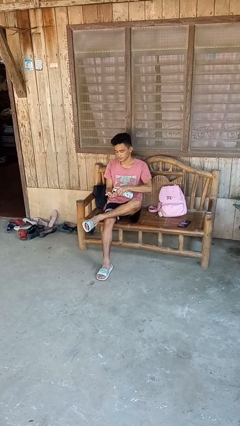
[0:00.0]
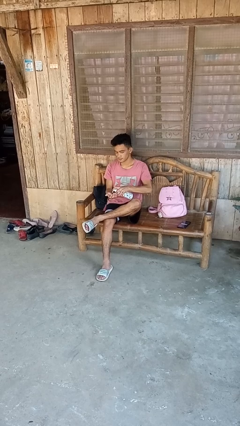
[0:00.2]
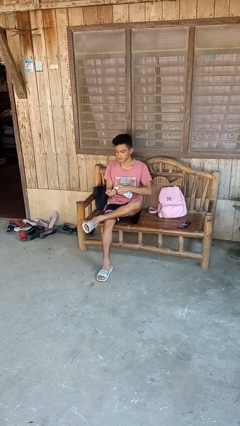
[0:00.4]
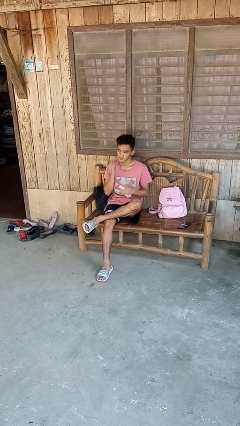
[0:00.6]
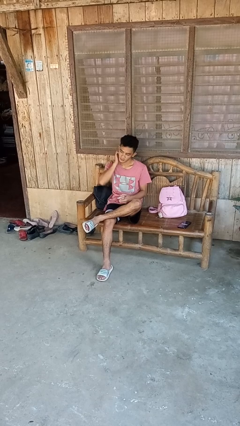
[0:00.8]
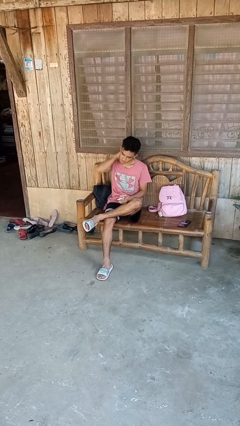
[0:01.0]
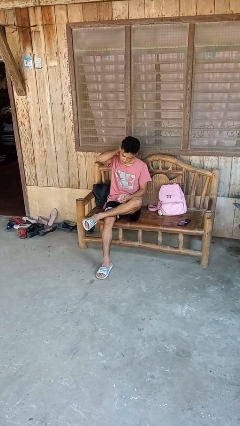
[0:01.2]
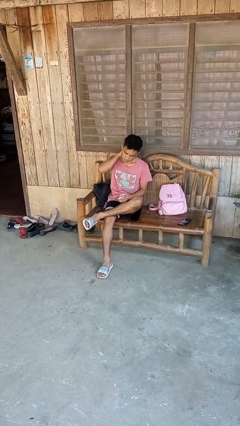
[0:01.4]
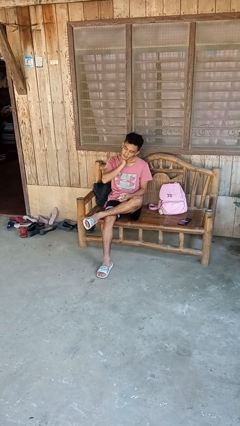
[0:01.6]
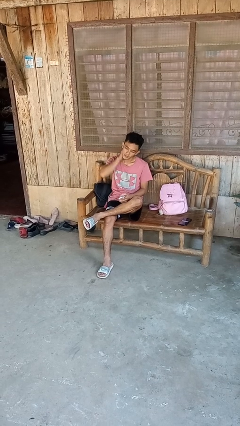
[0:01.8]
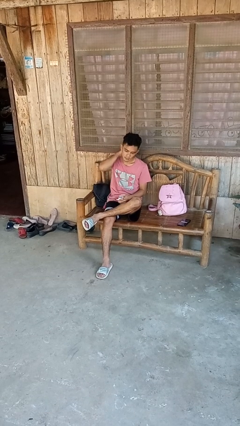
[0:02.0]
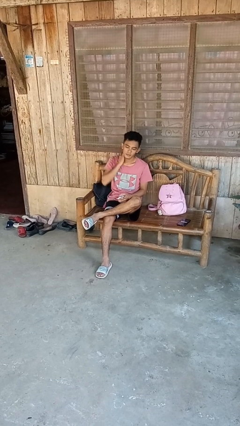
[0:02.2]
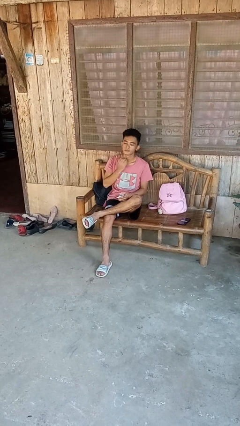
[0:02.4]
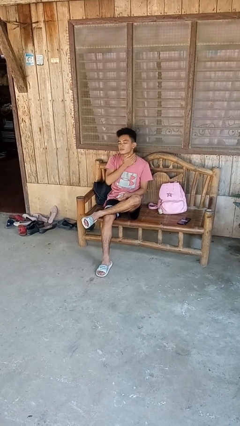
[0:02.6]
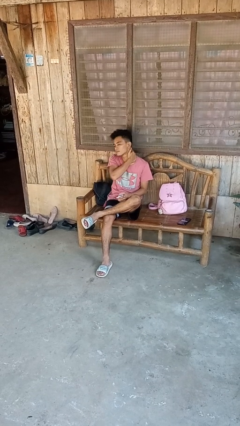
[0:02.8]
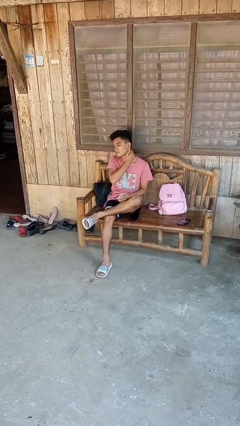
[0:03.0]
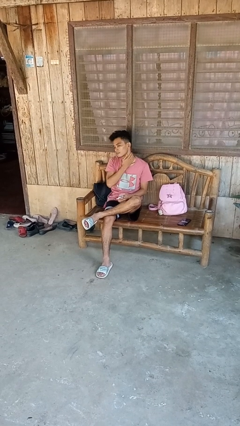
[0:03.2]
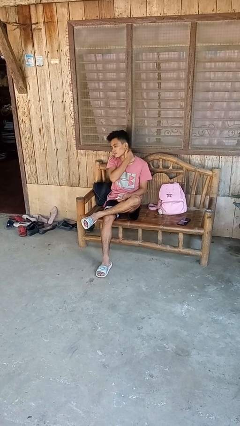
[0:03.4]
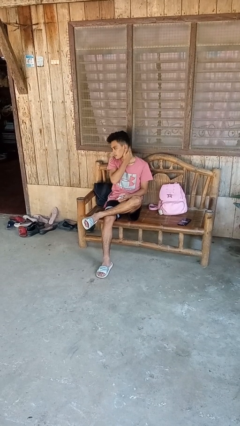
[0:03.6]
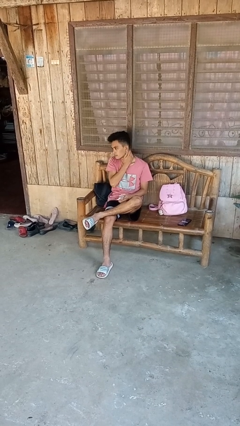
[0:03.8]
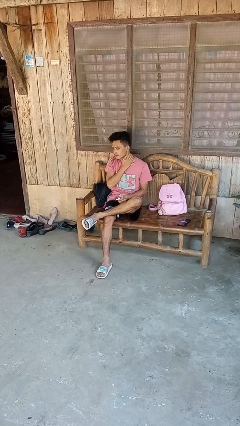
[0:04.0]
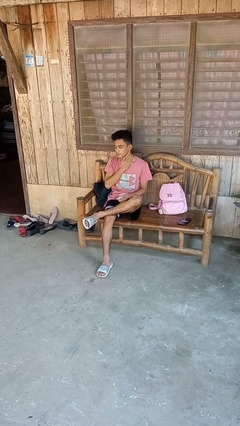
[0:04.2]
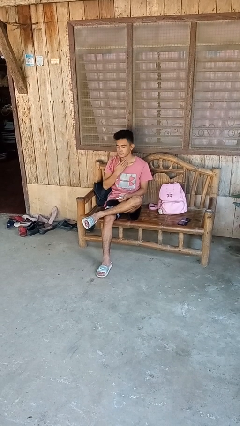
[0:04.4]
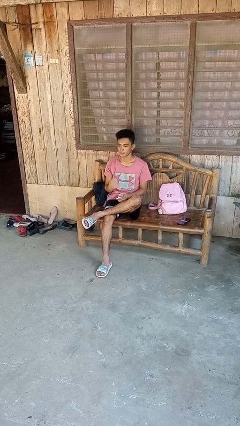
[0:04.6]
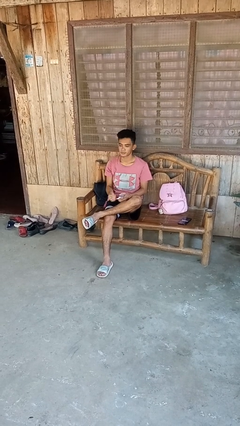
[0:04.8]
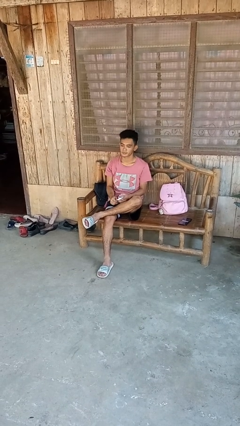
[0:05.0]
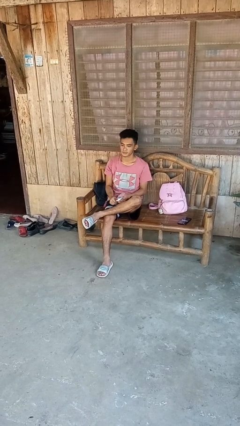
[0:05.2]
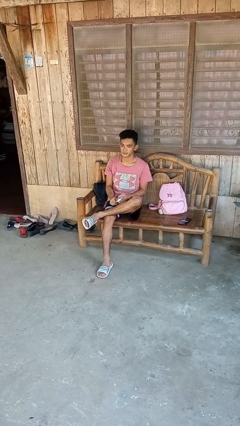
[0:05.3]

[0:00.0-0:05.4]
person applies sunscreen

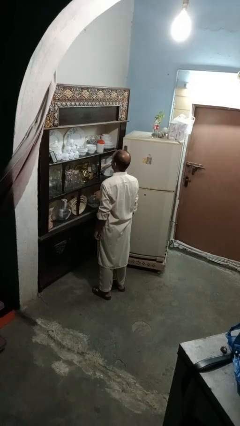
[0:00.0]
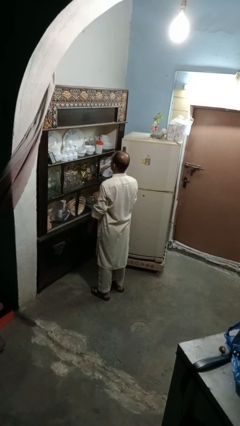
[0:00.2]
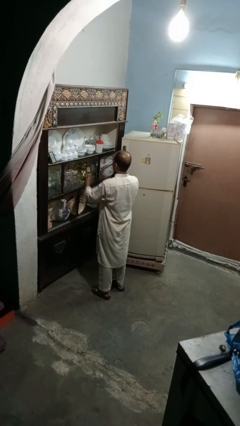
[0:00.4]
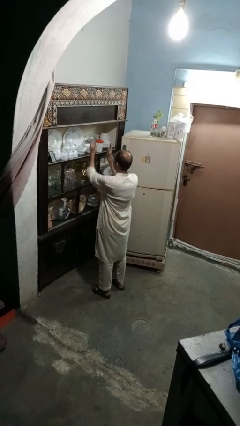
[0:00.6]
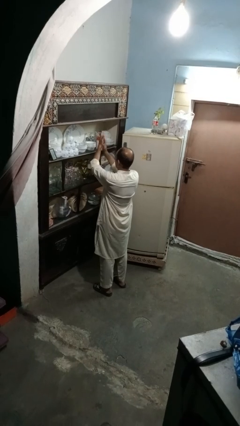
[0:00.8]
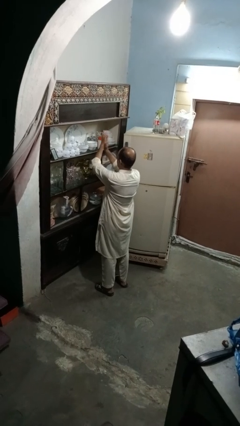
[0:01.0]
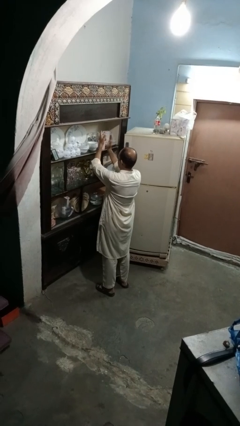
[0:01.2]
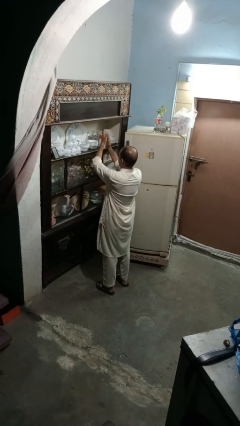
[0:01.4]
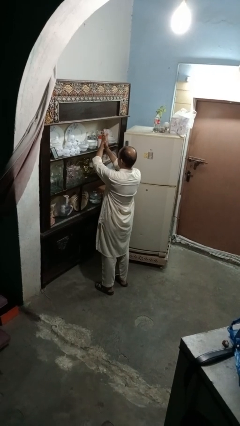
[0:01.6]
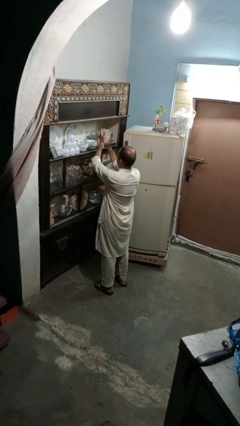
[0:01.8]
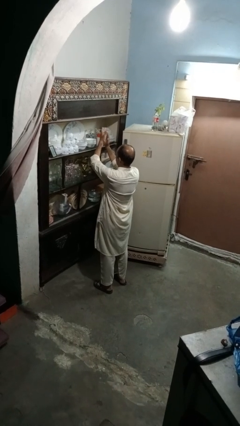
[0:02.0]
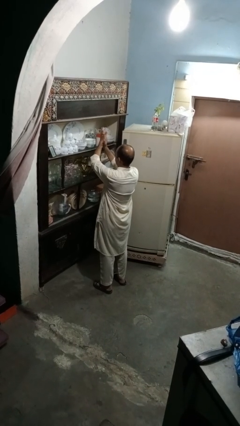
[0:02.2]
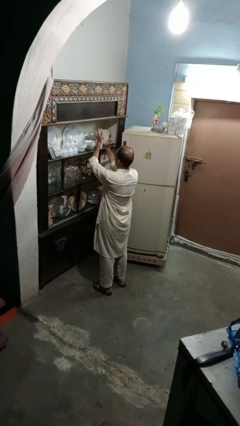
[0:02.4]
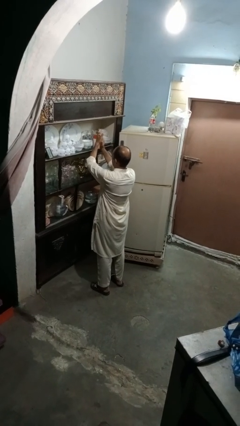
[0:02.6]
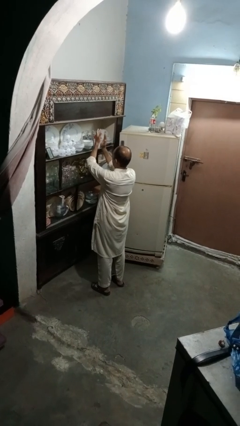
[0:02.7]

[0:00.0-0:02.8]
person claps hands

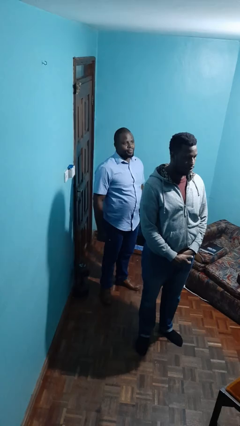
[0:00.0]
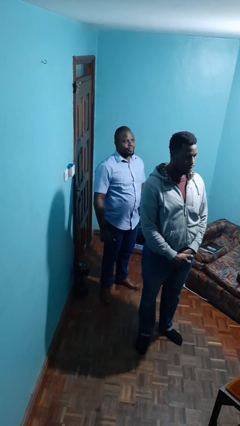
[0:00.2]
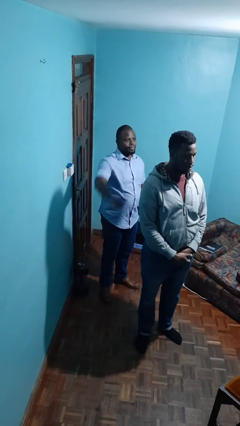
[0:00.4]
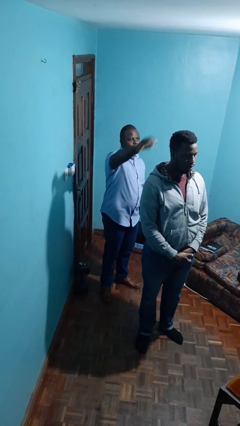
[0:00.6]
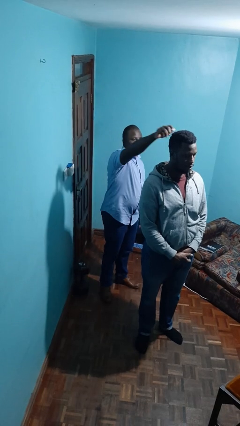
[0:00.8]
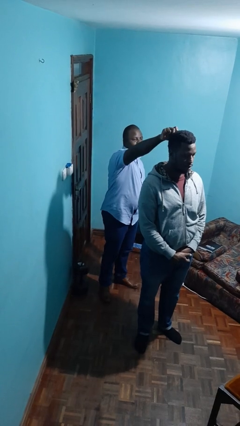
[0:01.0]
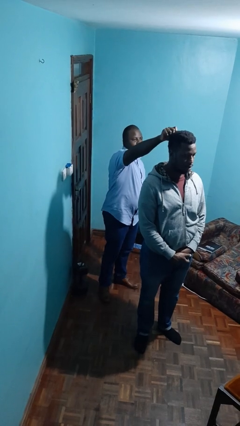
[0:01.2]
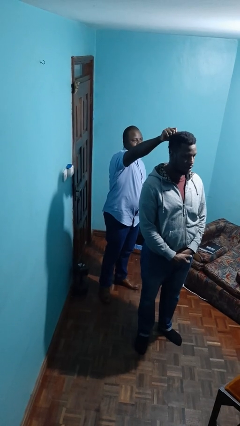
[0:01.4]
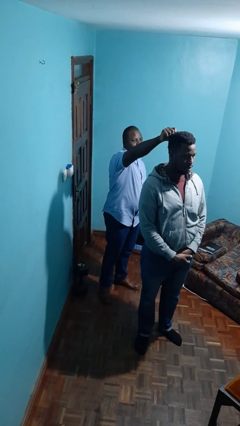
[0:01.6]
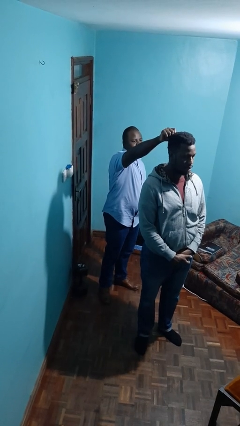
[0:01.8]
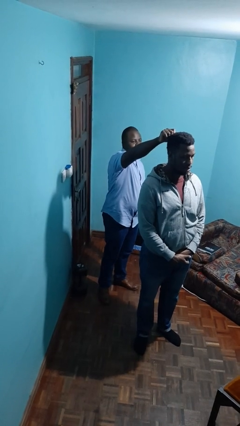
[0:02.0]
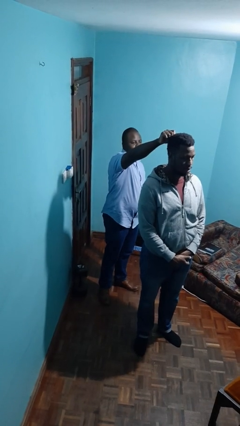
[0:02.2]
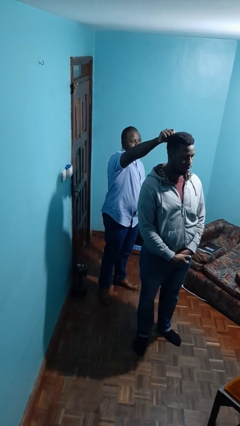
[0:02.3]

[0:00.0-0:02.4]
person grabs person by hair

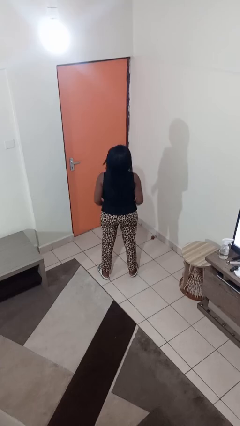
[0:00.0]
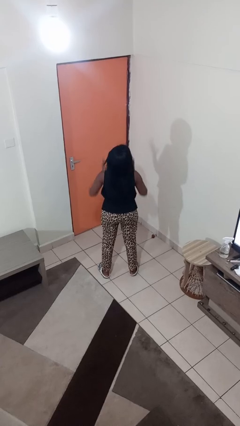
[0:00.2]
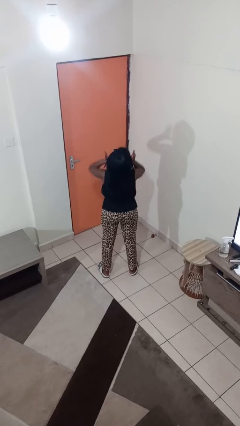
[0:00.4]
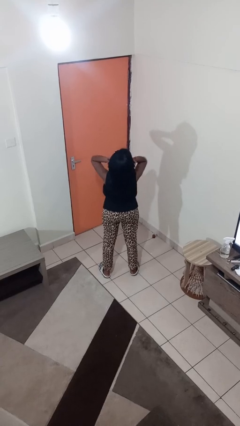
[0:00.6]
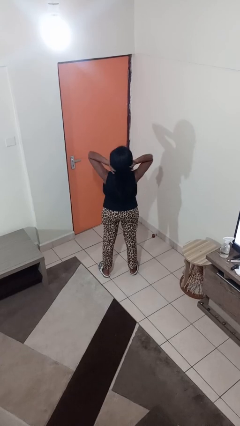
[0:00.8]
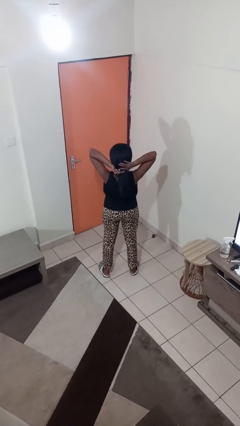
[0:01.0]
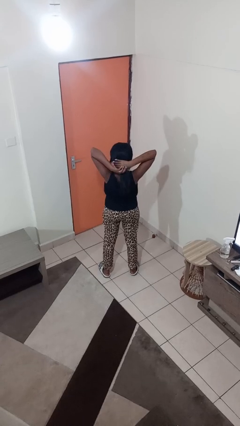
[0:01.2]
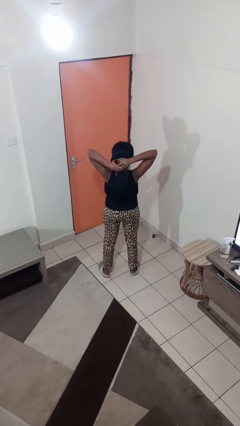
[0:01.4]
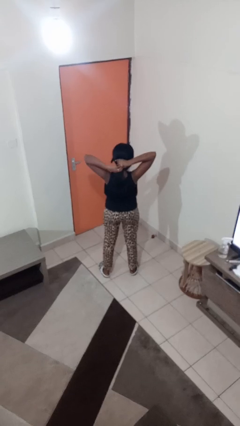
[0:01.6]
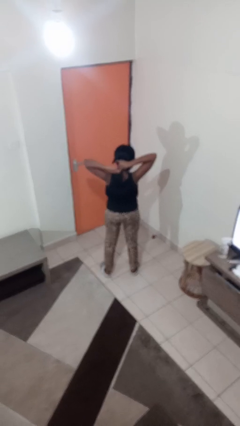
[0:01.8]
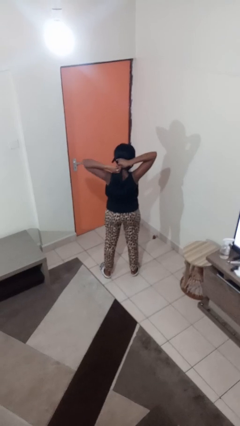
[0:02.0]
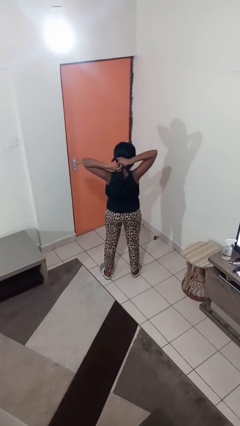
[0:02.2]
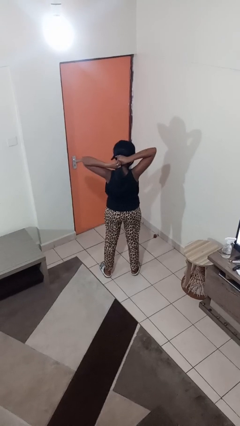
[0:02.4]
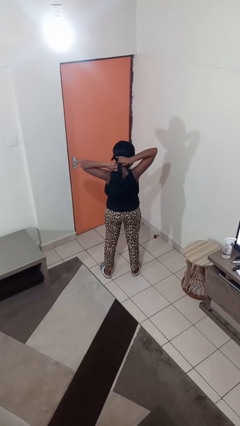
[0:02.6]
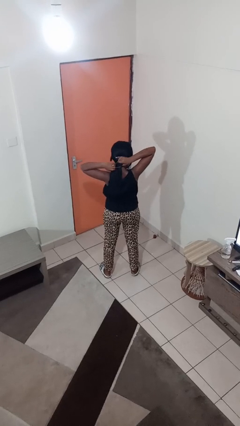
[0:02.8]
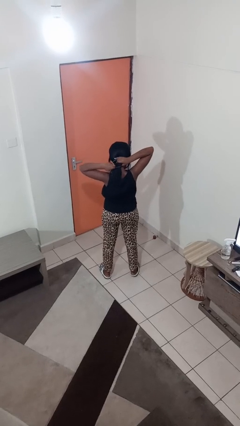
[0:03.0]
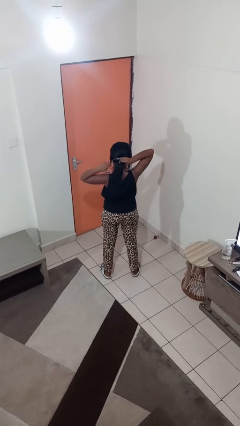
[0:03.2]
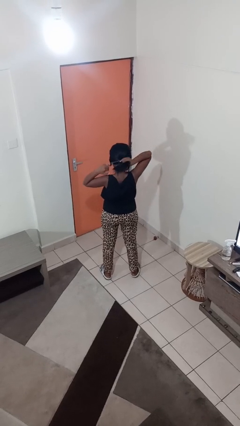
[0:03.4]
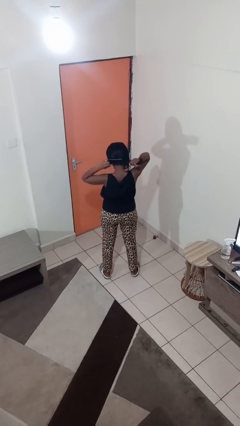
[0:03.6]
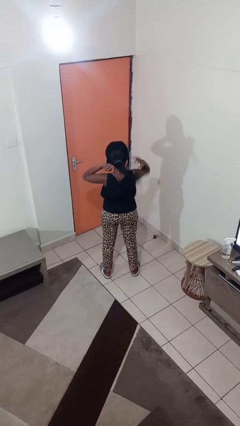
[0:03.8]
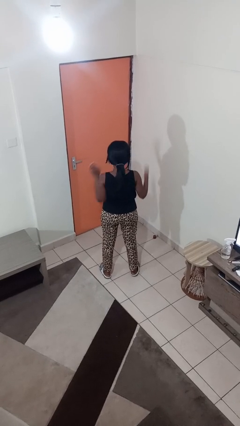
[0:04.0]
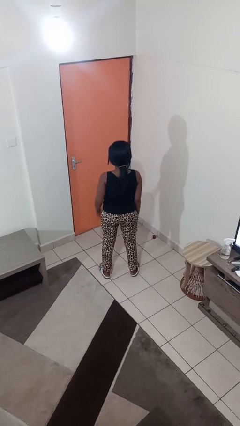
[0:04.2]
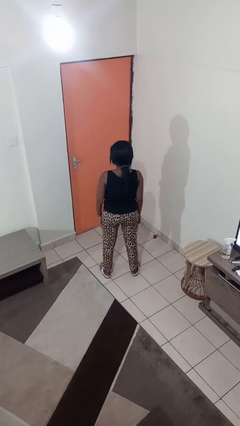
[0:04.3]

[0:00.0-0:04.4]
person puts hair in ponytail

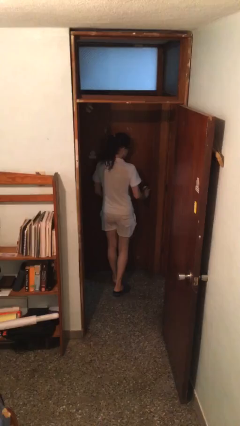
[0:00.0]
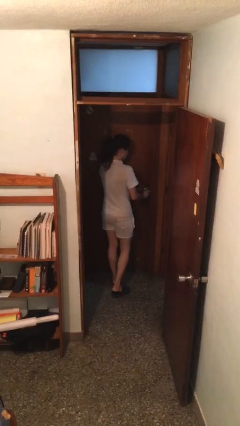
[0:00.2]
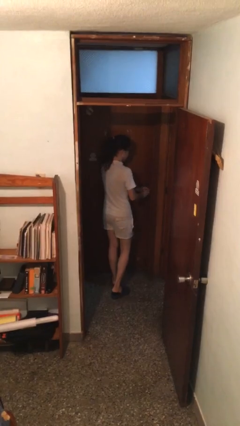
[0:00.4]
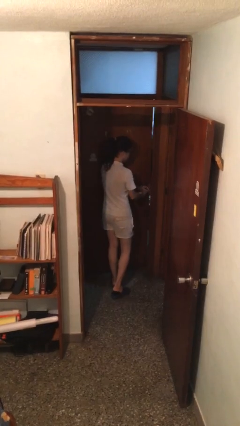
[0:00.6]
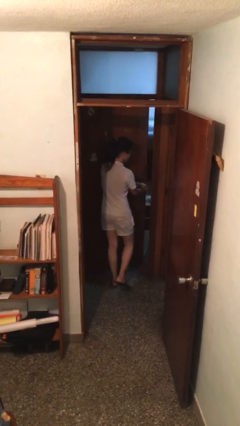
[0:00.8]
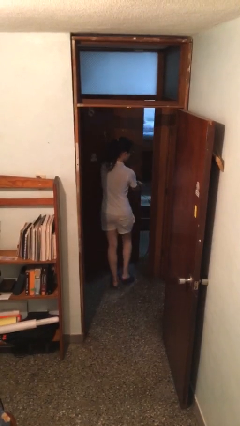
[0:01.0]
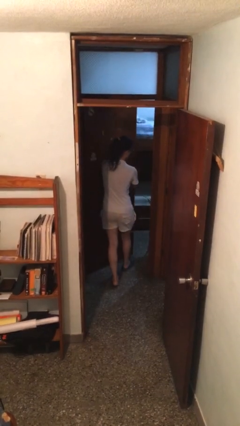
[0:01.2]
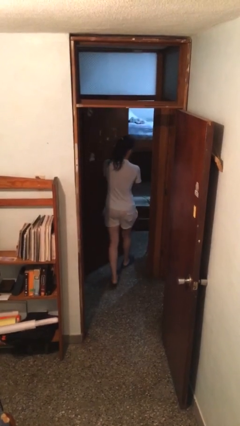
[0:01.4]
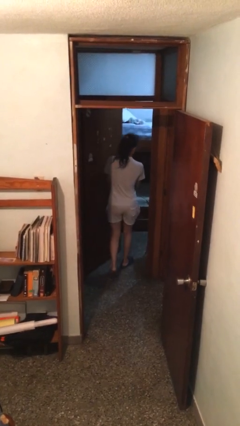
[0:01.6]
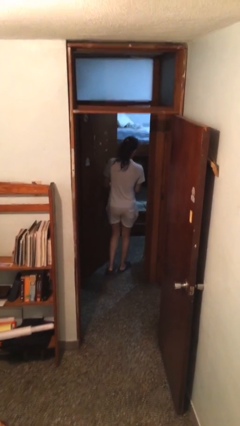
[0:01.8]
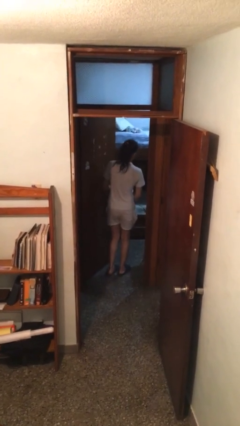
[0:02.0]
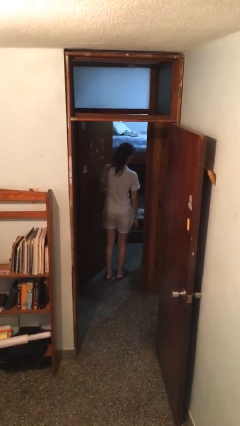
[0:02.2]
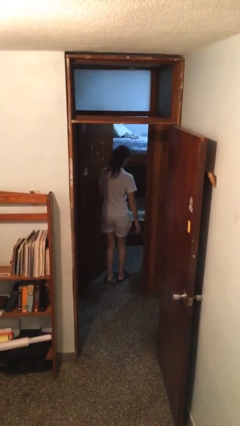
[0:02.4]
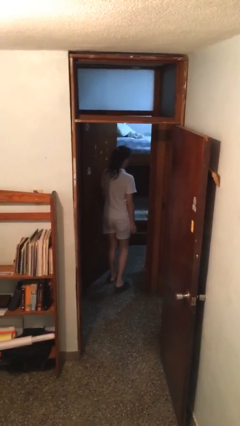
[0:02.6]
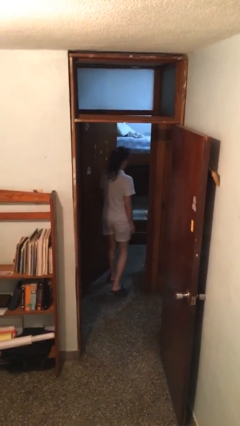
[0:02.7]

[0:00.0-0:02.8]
person opens facility door
